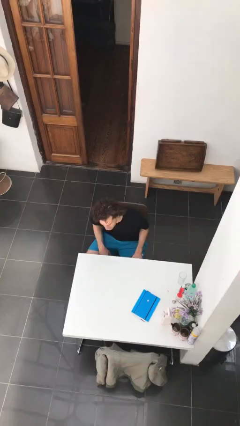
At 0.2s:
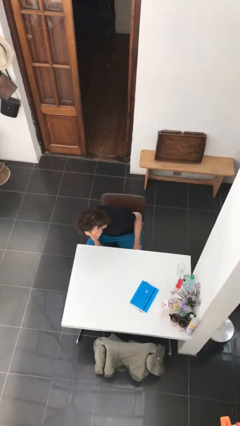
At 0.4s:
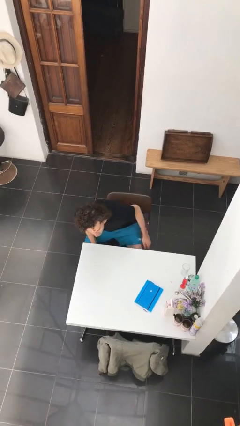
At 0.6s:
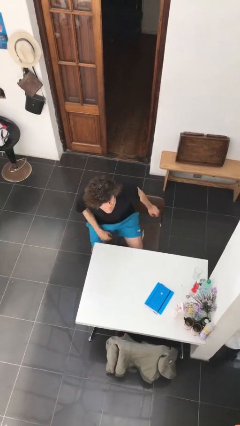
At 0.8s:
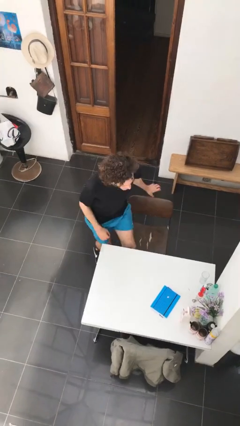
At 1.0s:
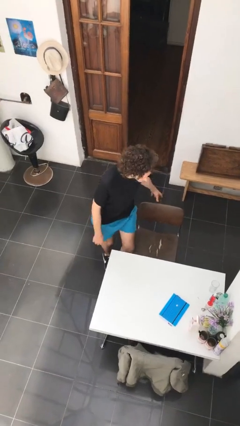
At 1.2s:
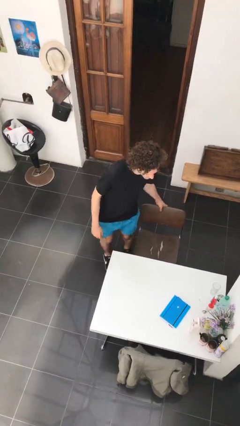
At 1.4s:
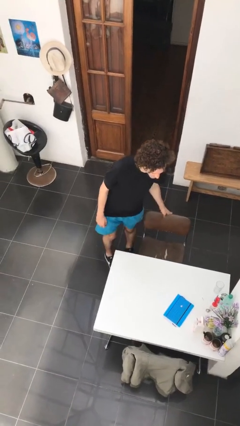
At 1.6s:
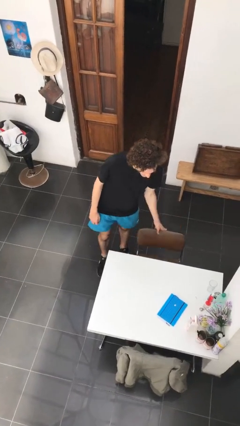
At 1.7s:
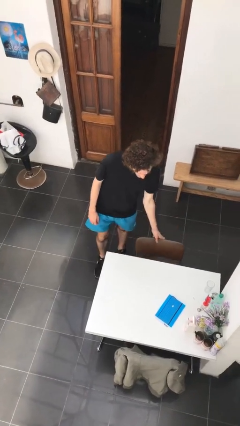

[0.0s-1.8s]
person stands up

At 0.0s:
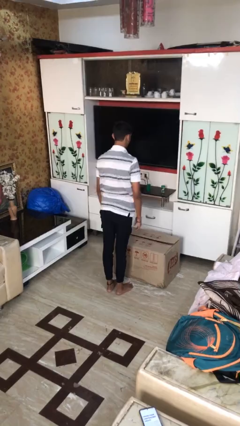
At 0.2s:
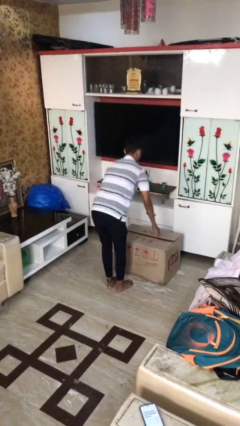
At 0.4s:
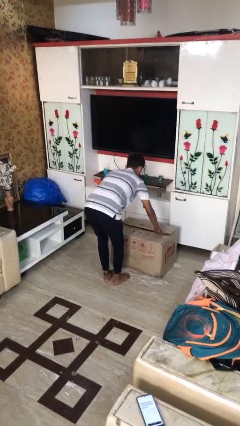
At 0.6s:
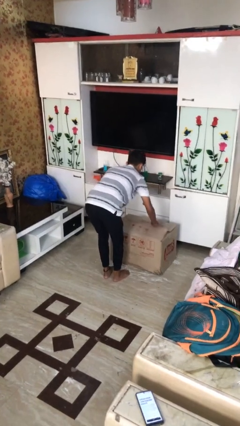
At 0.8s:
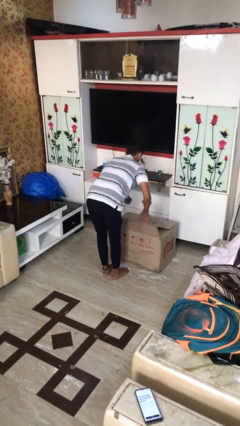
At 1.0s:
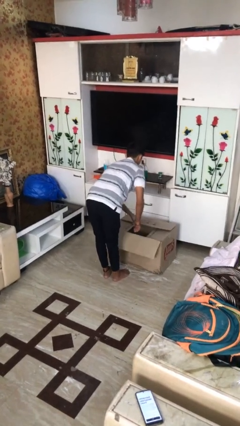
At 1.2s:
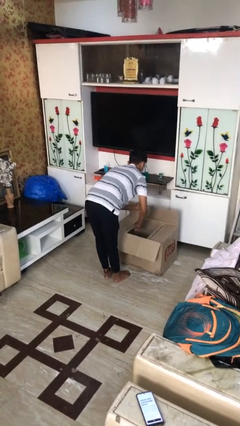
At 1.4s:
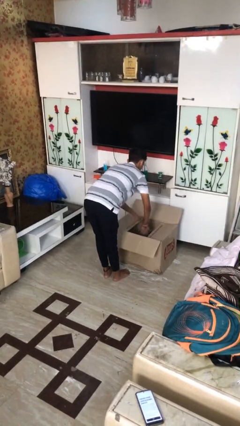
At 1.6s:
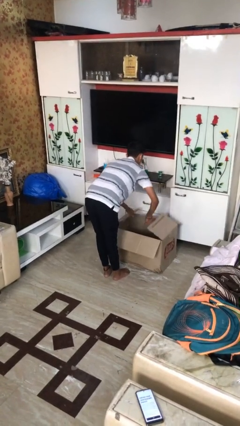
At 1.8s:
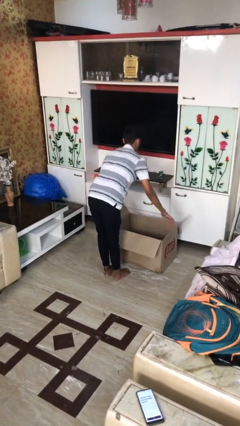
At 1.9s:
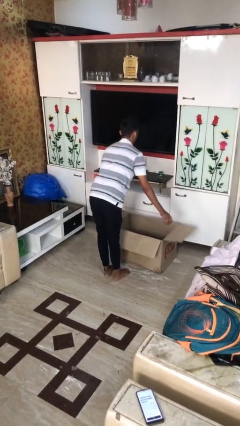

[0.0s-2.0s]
person opens box

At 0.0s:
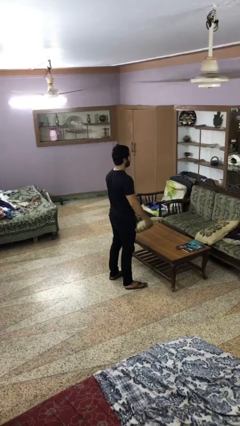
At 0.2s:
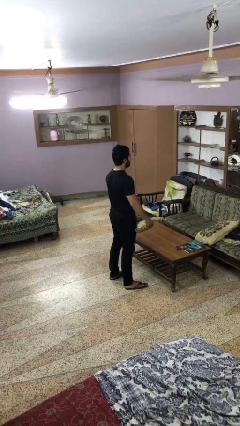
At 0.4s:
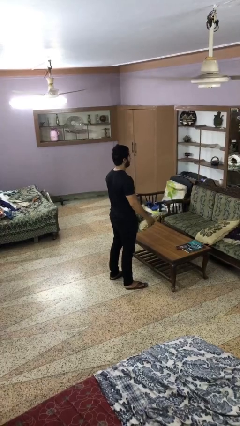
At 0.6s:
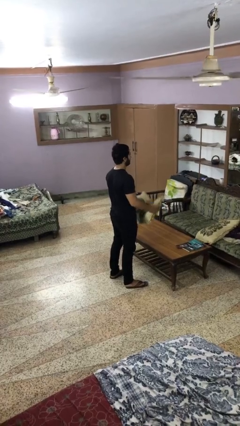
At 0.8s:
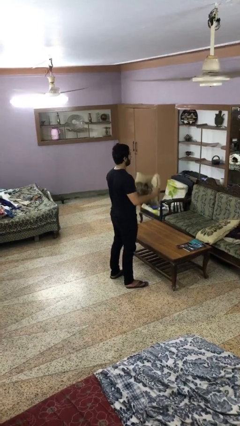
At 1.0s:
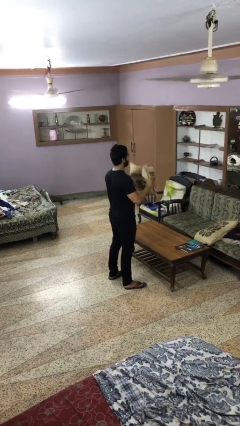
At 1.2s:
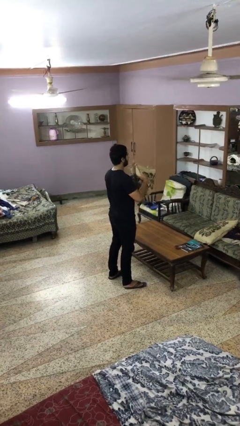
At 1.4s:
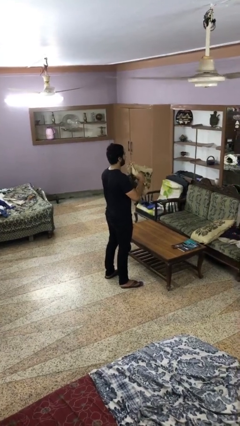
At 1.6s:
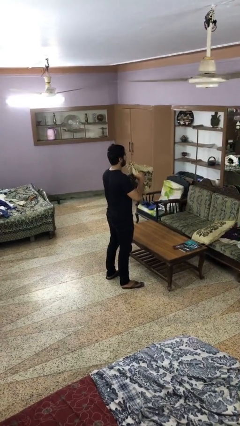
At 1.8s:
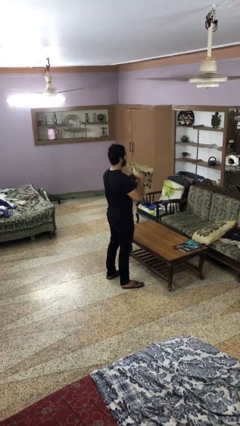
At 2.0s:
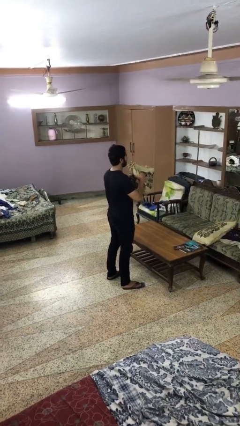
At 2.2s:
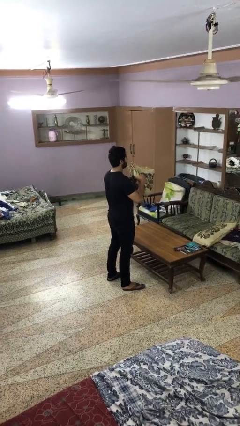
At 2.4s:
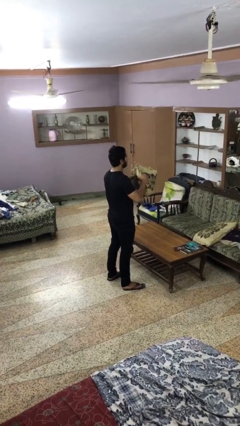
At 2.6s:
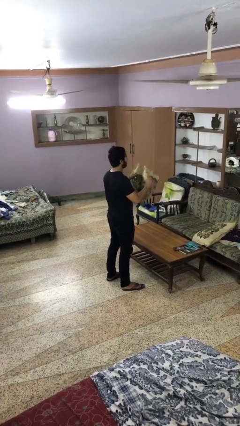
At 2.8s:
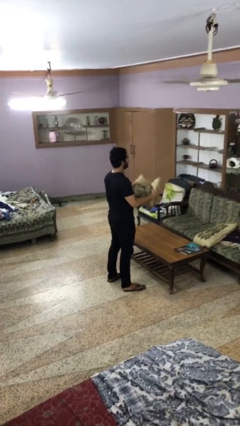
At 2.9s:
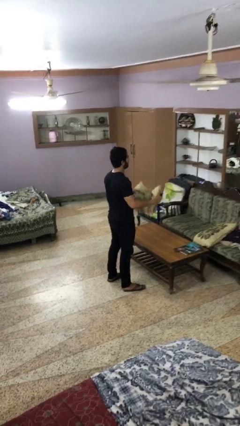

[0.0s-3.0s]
person squeezes object

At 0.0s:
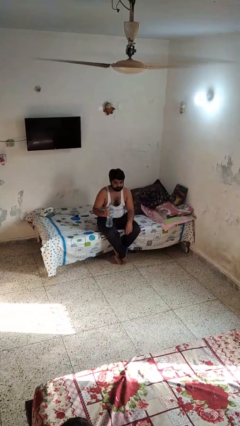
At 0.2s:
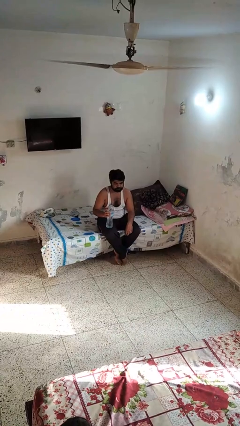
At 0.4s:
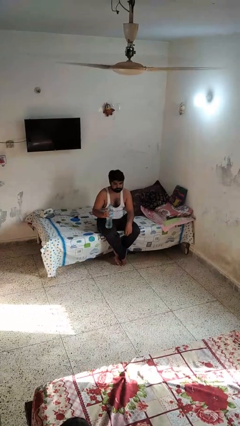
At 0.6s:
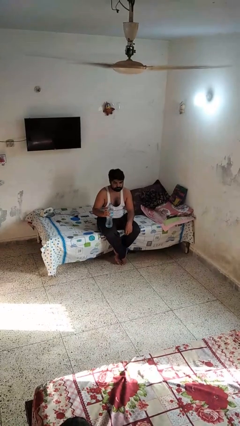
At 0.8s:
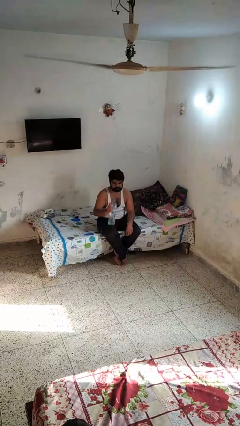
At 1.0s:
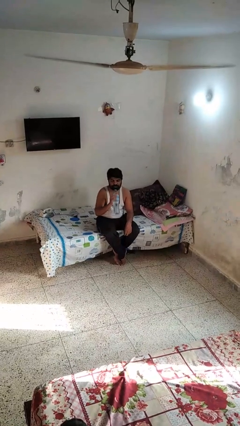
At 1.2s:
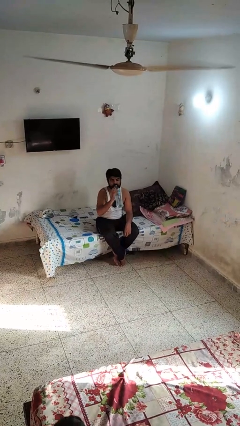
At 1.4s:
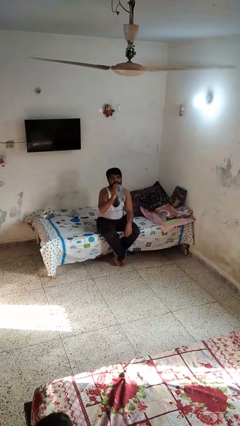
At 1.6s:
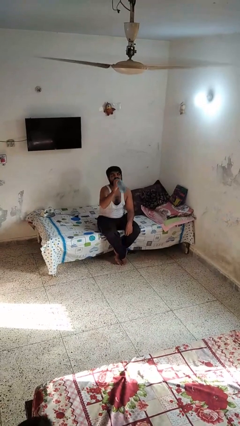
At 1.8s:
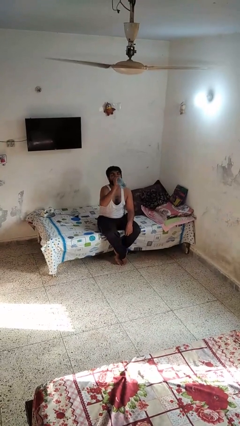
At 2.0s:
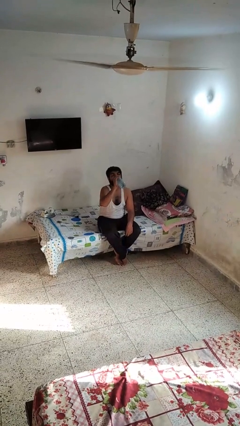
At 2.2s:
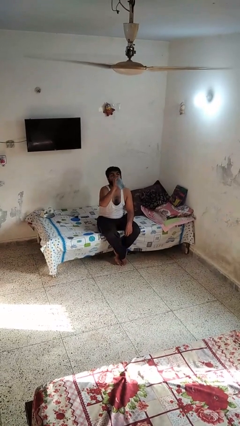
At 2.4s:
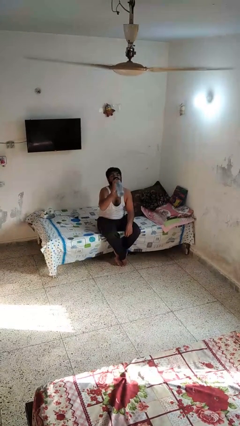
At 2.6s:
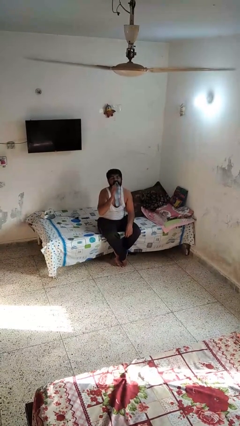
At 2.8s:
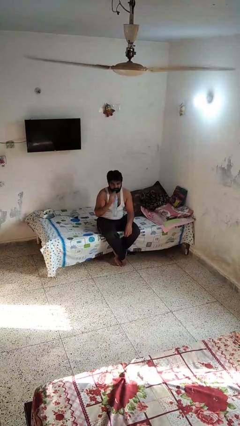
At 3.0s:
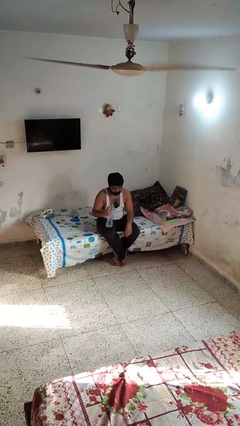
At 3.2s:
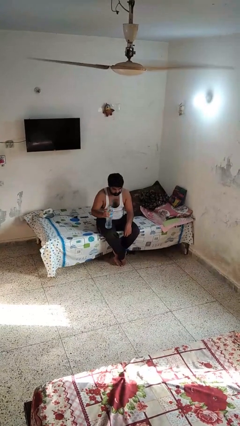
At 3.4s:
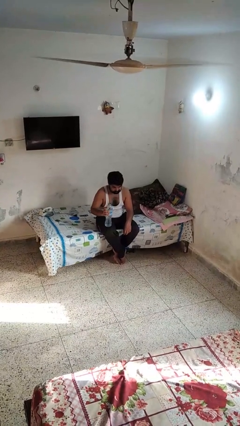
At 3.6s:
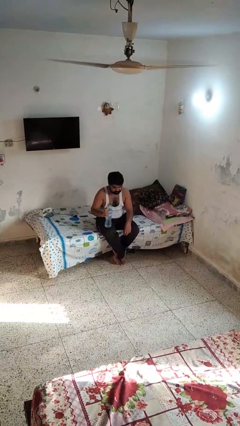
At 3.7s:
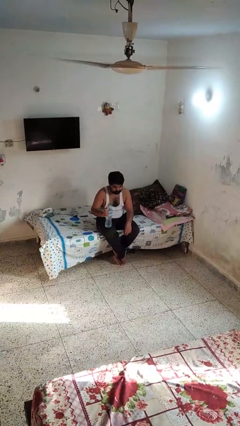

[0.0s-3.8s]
person drinks from bottle

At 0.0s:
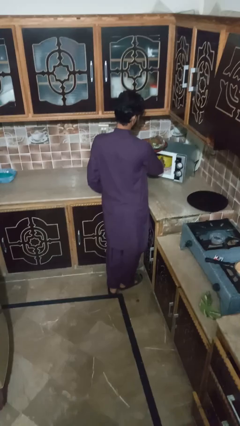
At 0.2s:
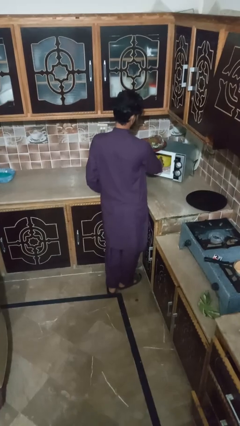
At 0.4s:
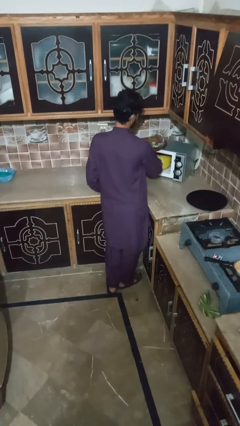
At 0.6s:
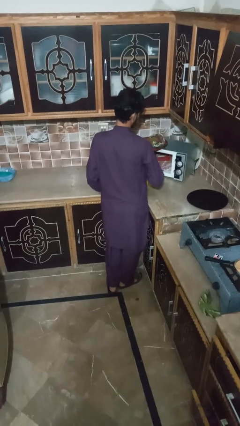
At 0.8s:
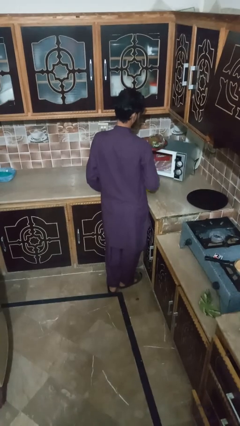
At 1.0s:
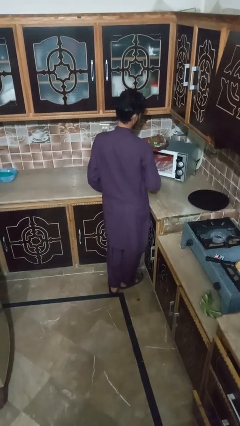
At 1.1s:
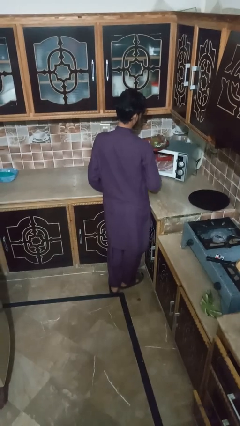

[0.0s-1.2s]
person takes object from microwave

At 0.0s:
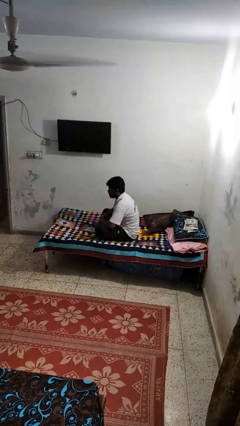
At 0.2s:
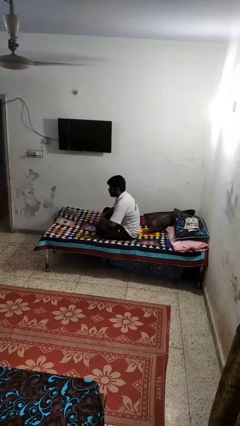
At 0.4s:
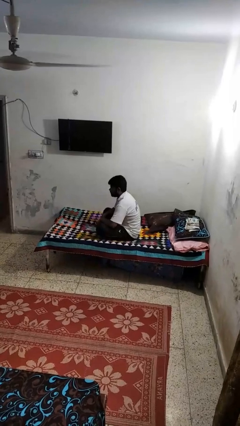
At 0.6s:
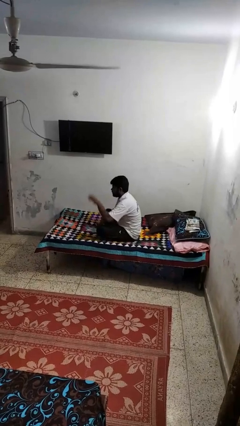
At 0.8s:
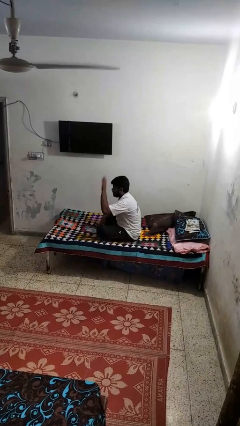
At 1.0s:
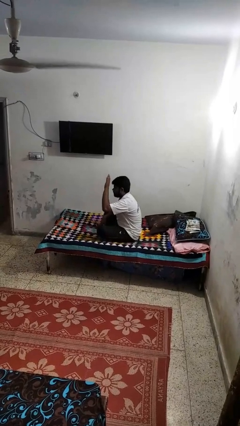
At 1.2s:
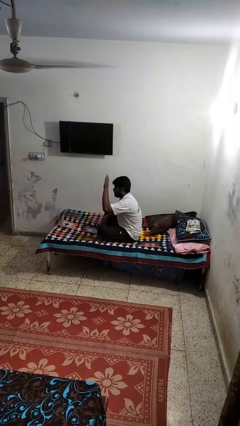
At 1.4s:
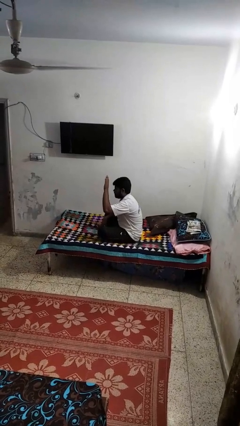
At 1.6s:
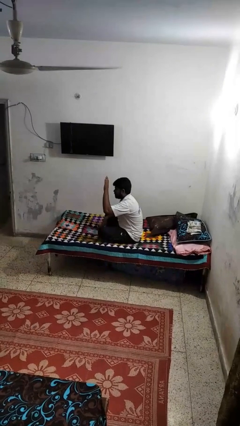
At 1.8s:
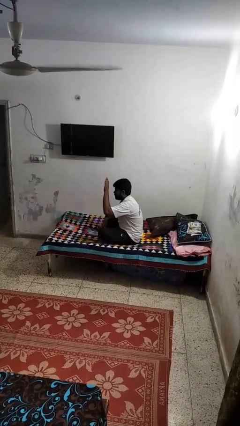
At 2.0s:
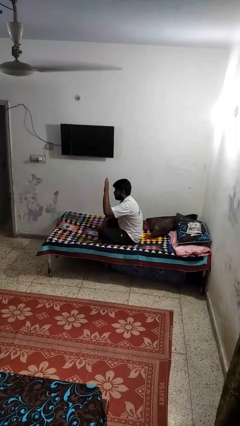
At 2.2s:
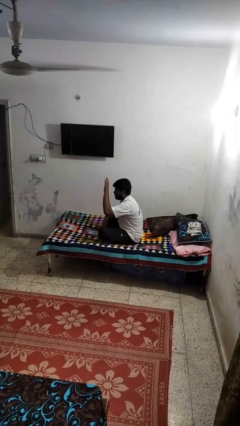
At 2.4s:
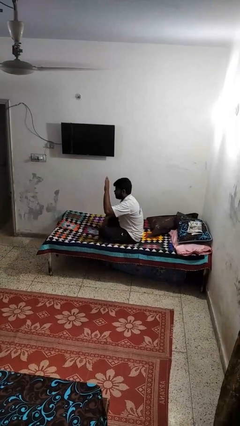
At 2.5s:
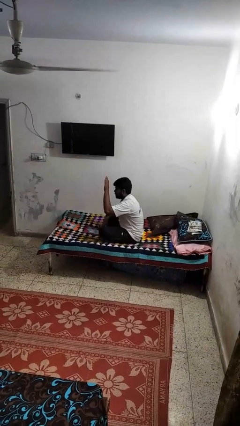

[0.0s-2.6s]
person gestures raise hand

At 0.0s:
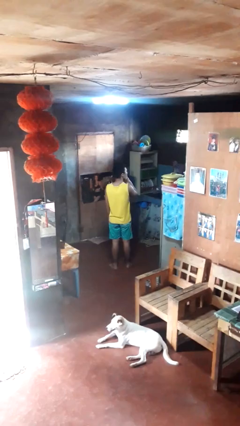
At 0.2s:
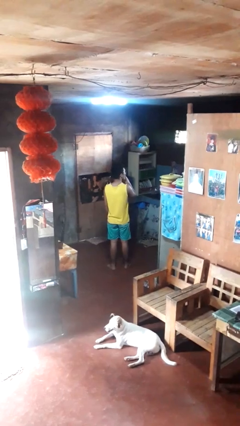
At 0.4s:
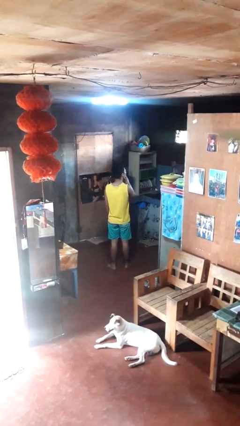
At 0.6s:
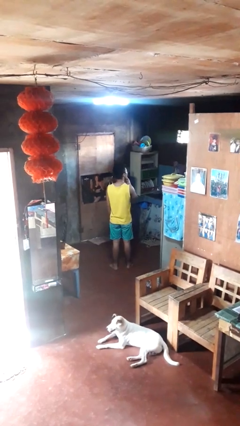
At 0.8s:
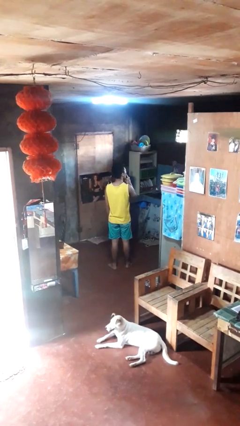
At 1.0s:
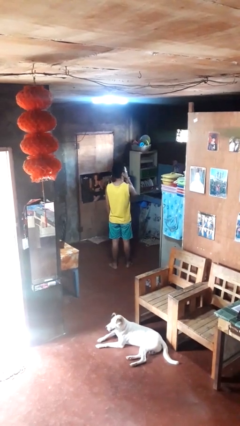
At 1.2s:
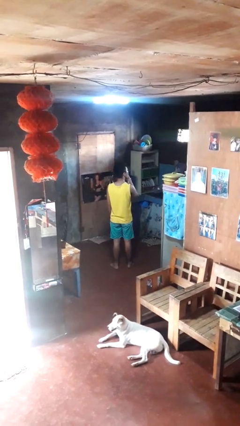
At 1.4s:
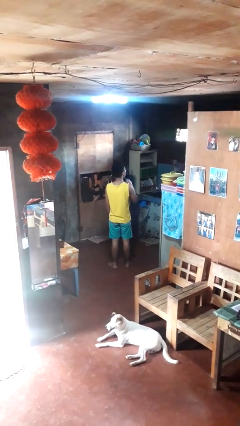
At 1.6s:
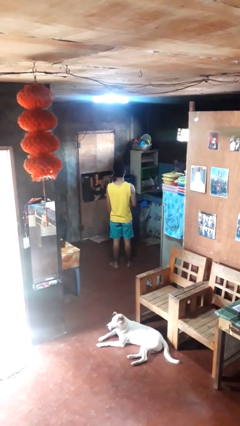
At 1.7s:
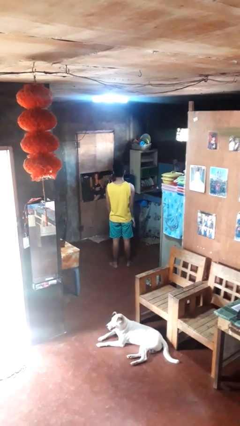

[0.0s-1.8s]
person licks fingers

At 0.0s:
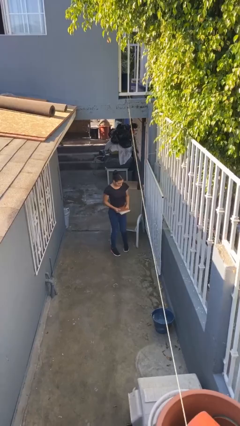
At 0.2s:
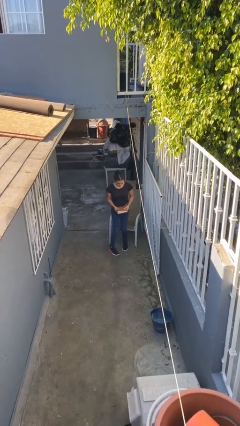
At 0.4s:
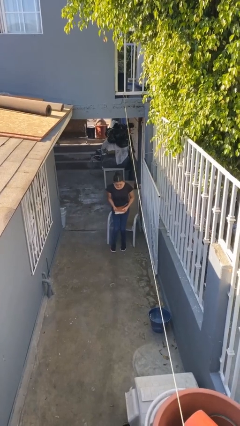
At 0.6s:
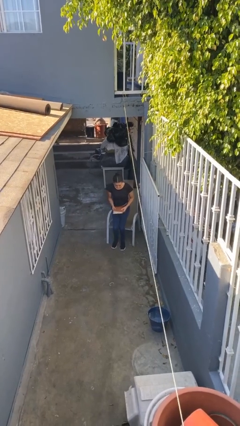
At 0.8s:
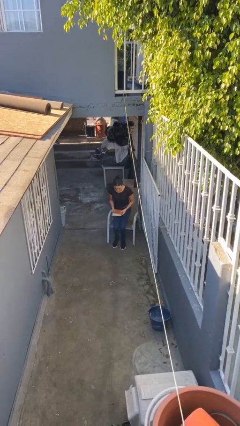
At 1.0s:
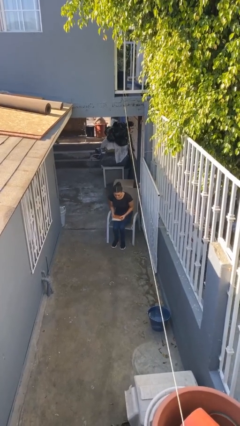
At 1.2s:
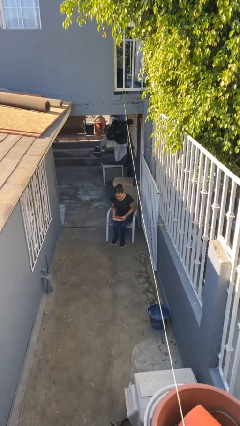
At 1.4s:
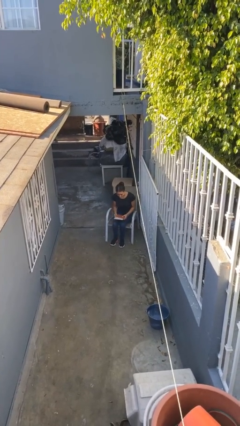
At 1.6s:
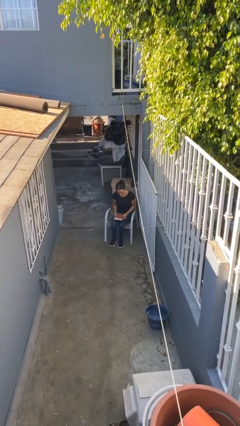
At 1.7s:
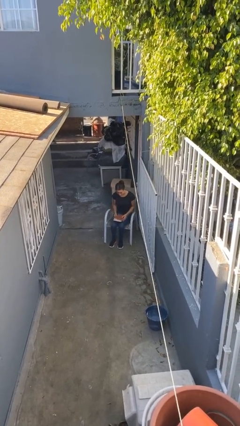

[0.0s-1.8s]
person sits down
